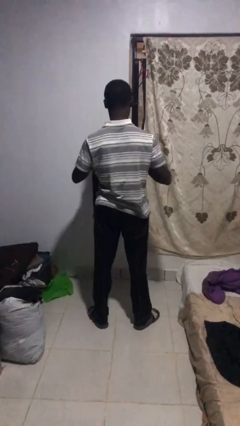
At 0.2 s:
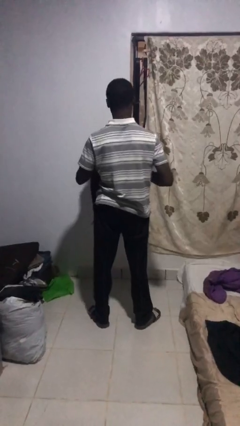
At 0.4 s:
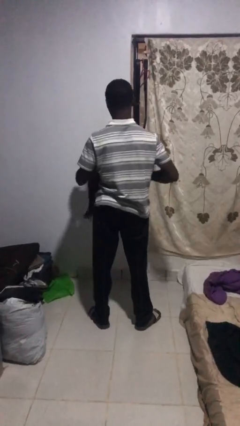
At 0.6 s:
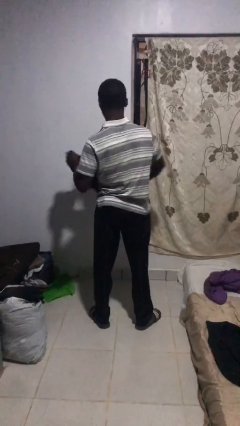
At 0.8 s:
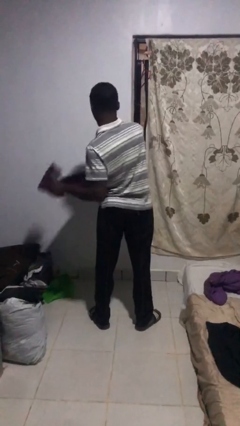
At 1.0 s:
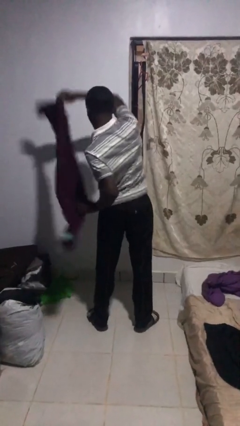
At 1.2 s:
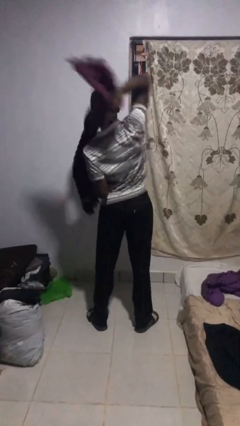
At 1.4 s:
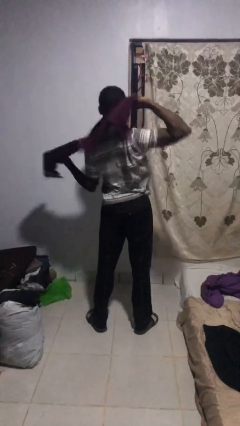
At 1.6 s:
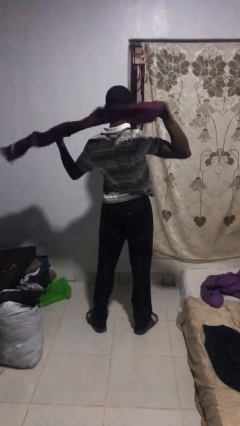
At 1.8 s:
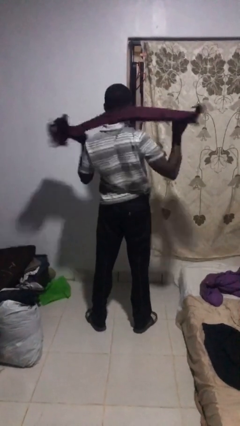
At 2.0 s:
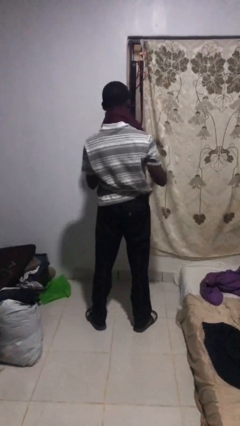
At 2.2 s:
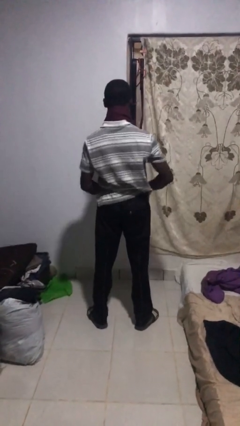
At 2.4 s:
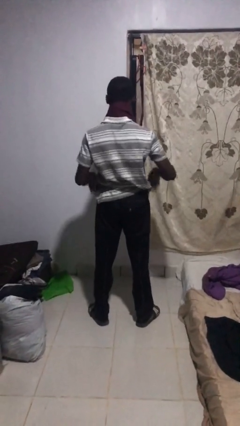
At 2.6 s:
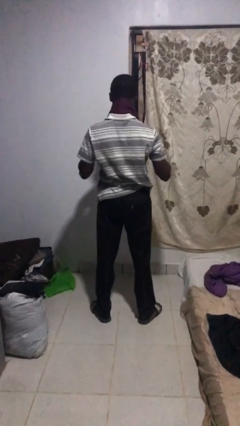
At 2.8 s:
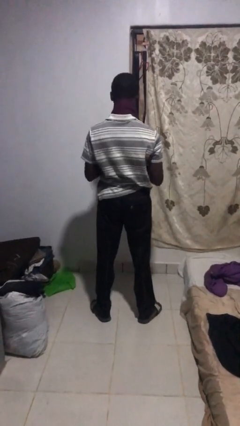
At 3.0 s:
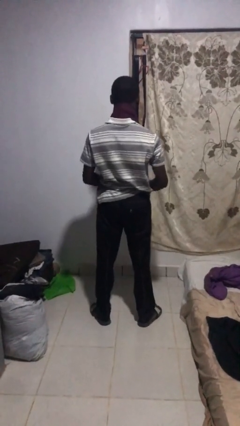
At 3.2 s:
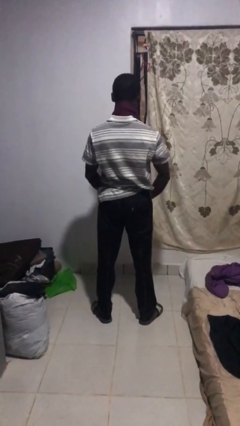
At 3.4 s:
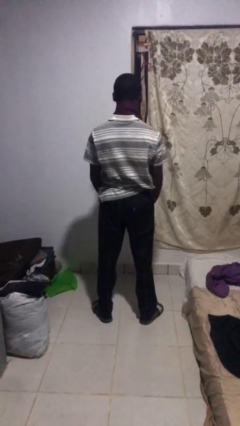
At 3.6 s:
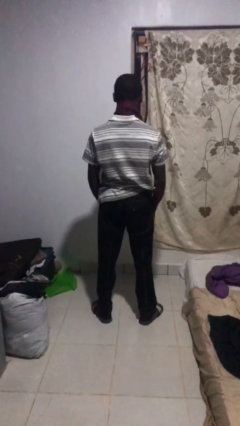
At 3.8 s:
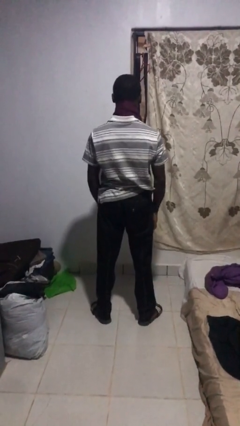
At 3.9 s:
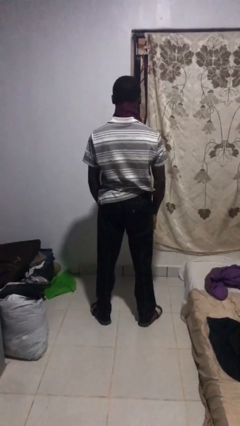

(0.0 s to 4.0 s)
person puts on scarf

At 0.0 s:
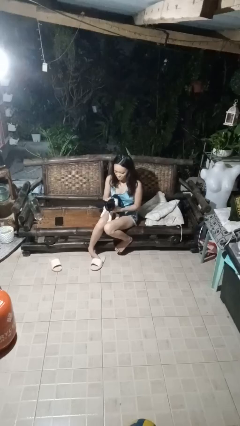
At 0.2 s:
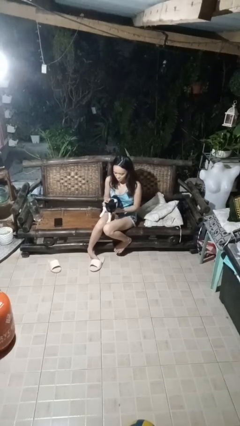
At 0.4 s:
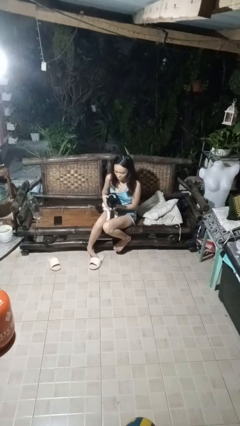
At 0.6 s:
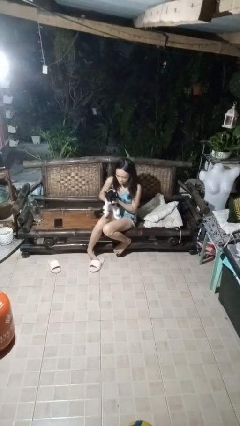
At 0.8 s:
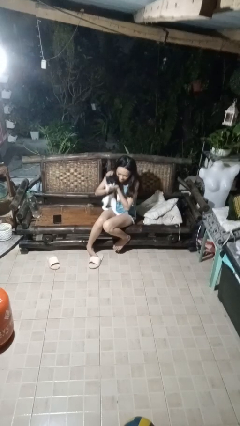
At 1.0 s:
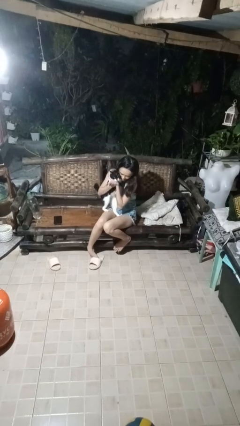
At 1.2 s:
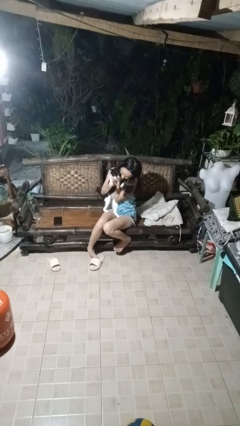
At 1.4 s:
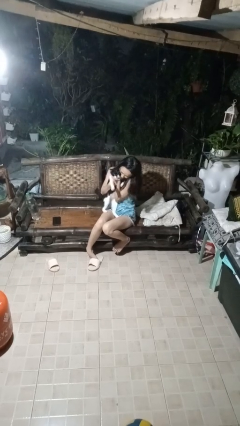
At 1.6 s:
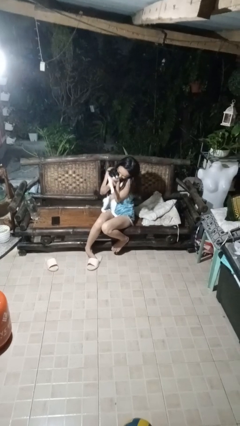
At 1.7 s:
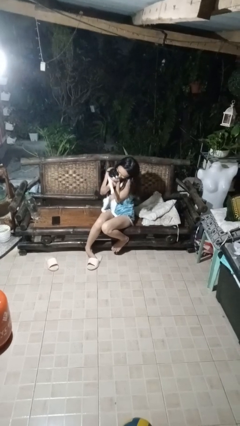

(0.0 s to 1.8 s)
person hugs cat

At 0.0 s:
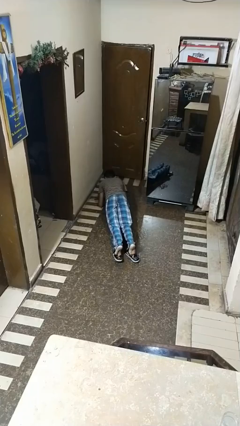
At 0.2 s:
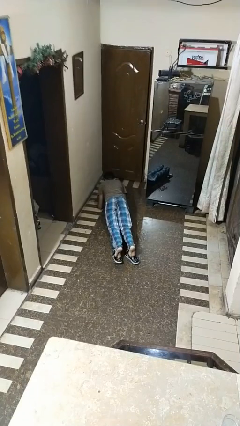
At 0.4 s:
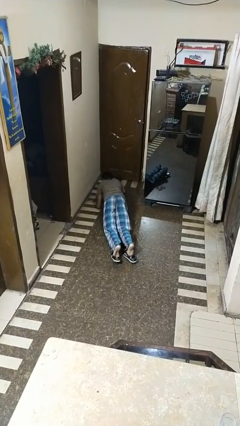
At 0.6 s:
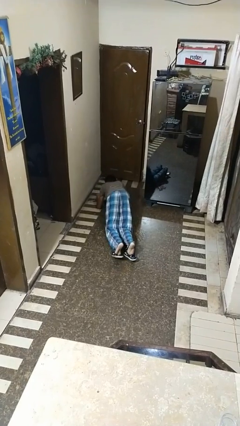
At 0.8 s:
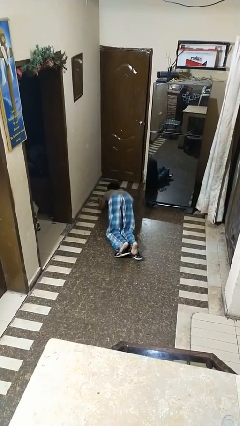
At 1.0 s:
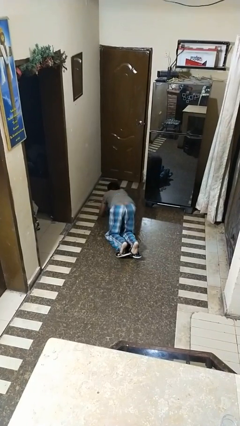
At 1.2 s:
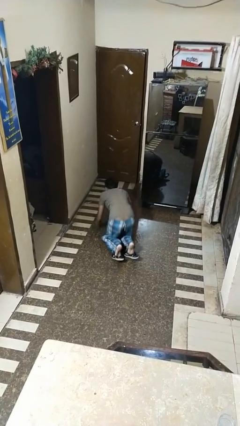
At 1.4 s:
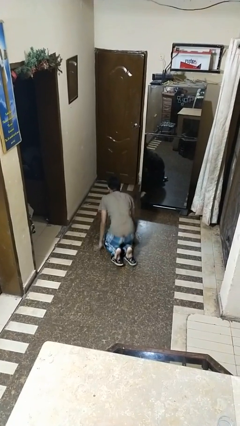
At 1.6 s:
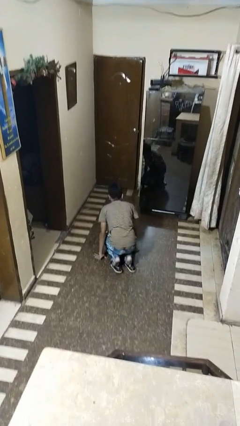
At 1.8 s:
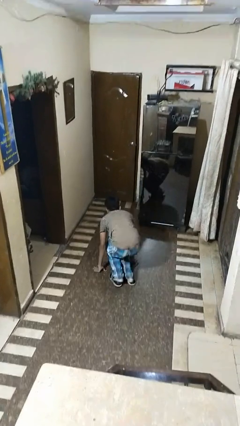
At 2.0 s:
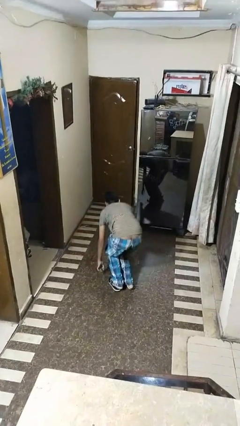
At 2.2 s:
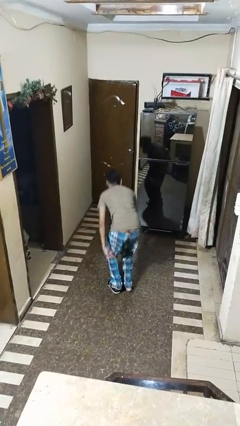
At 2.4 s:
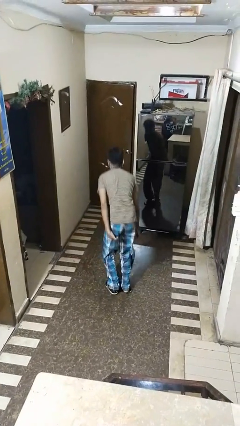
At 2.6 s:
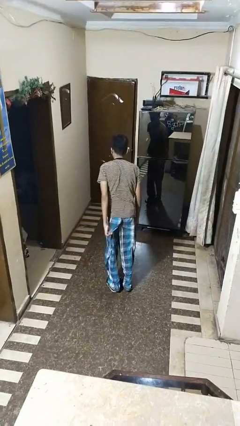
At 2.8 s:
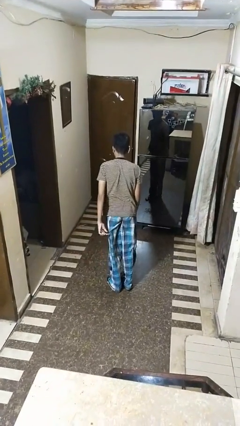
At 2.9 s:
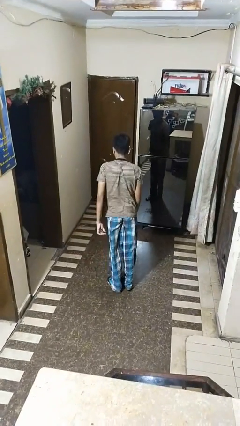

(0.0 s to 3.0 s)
person stands up from floor

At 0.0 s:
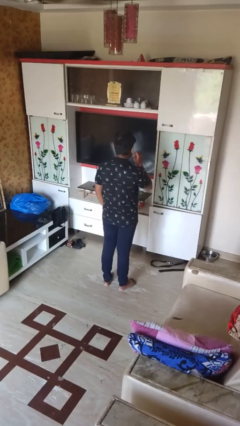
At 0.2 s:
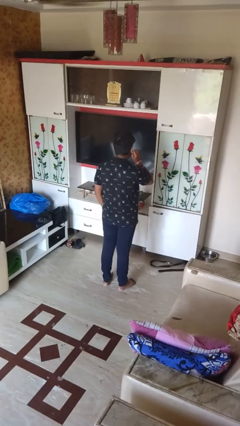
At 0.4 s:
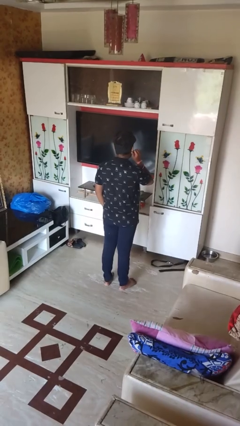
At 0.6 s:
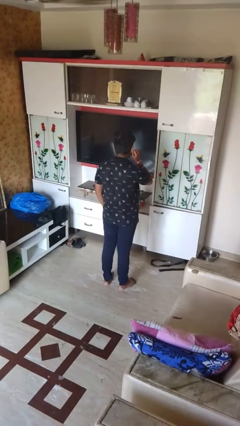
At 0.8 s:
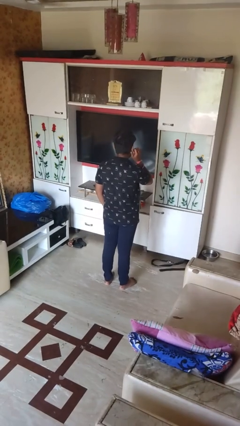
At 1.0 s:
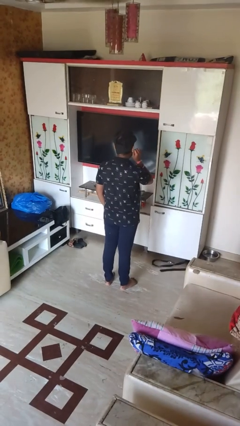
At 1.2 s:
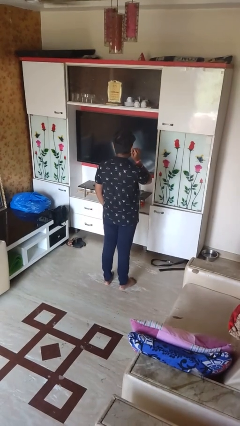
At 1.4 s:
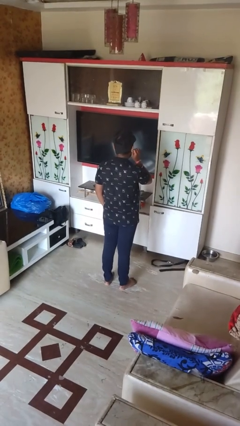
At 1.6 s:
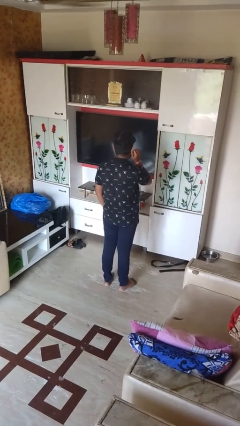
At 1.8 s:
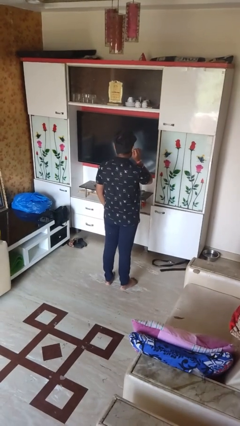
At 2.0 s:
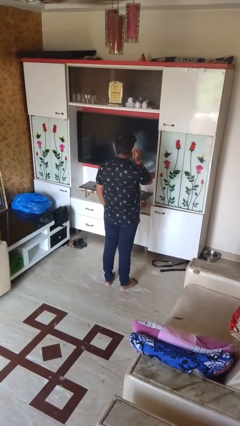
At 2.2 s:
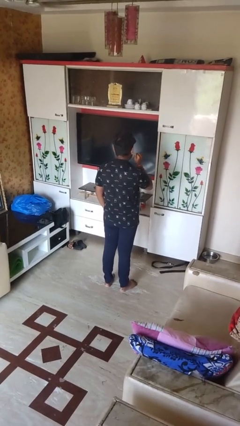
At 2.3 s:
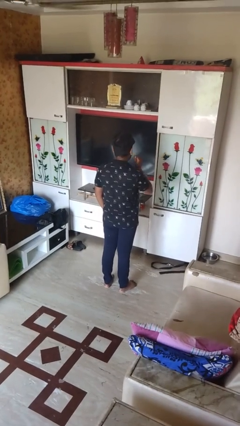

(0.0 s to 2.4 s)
person touches earlobe

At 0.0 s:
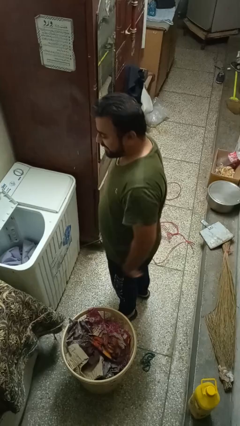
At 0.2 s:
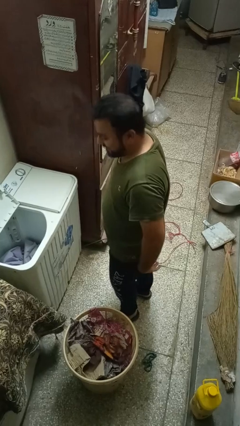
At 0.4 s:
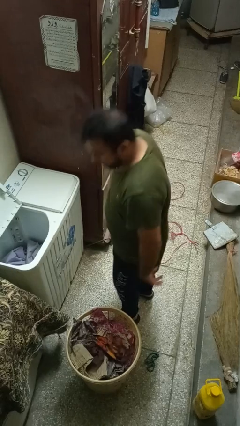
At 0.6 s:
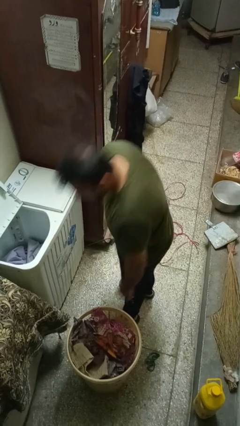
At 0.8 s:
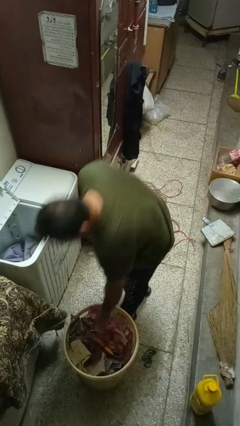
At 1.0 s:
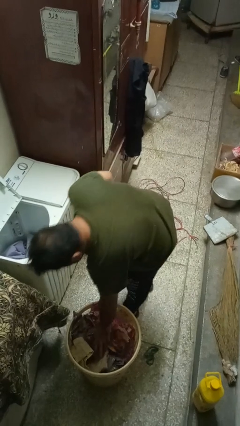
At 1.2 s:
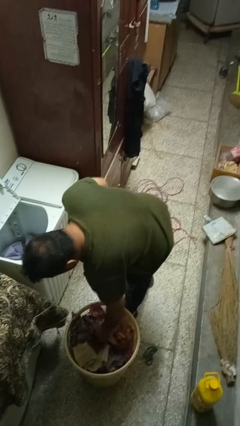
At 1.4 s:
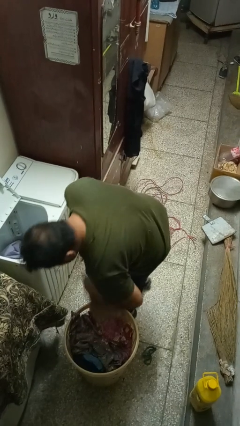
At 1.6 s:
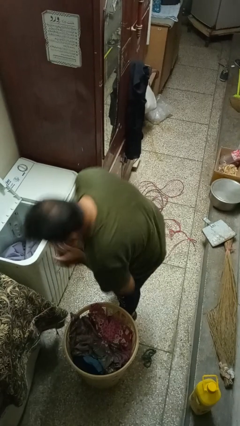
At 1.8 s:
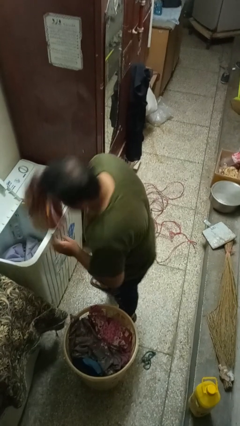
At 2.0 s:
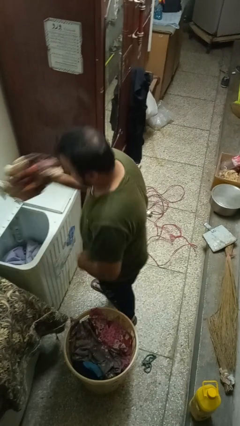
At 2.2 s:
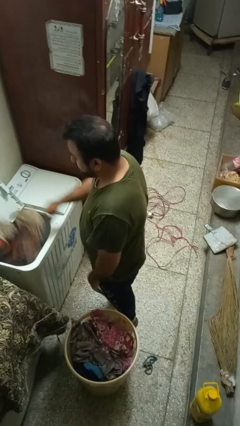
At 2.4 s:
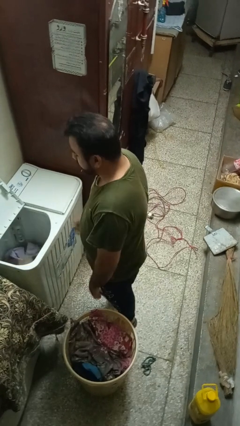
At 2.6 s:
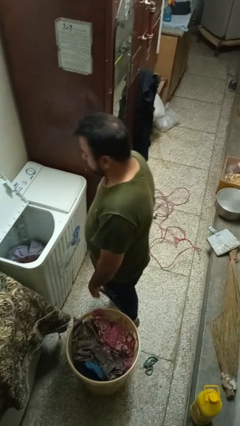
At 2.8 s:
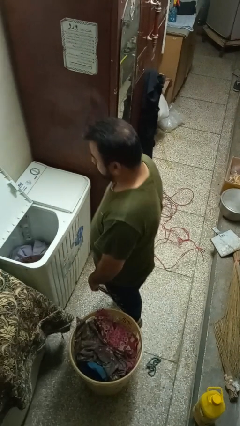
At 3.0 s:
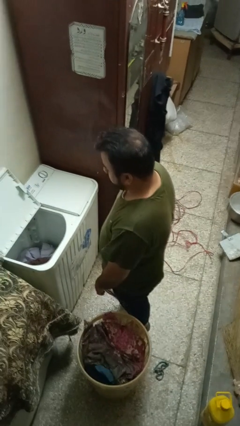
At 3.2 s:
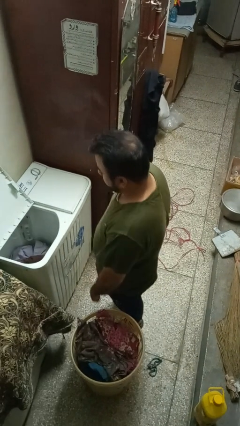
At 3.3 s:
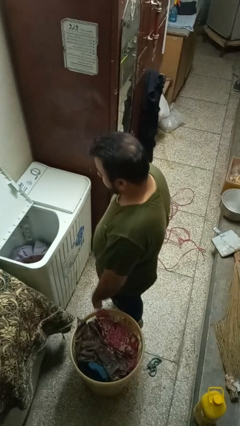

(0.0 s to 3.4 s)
person loads clotheswasher

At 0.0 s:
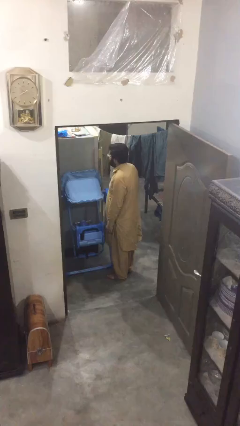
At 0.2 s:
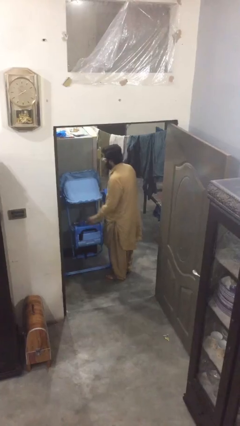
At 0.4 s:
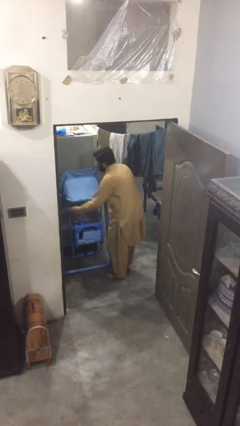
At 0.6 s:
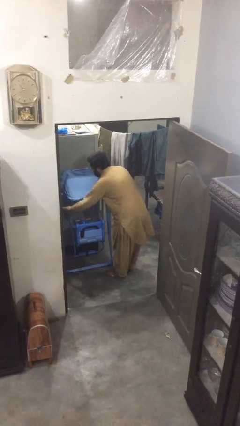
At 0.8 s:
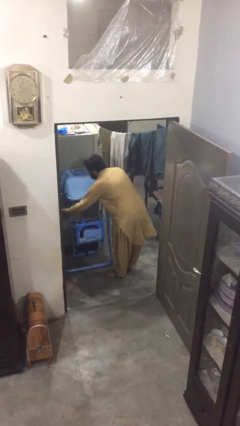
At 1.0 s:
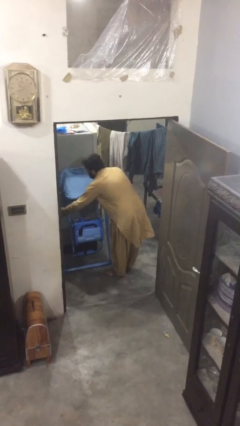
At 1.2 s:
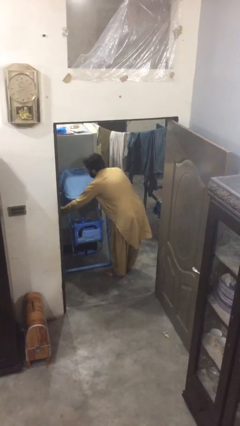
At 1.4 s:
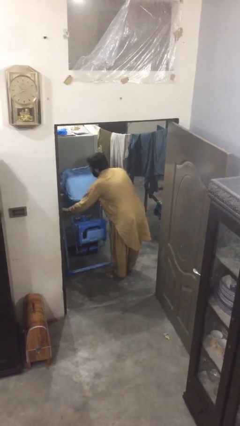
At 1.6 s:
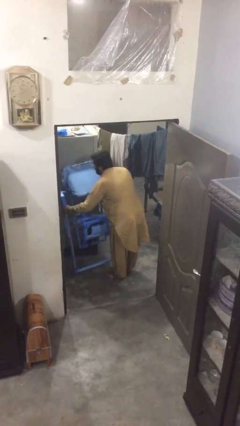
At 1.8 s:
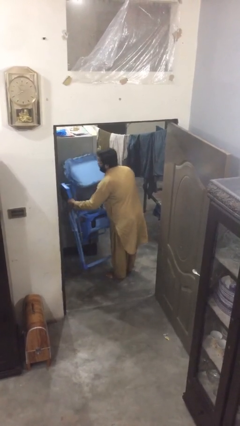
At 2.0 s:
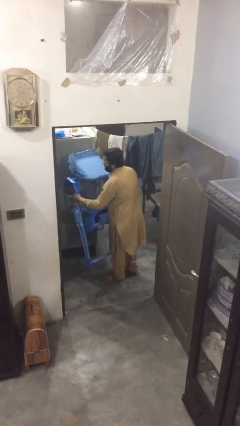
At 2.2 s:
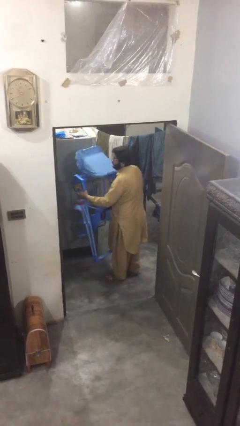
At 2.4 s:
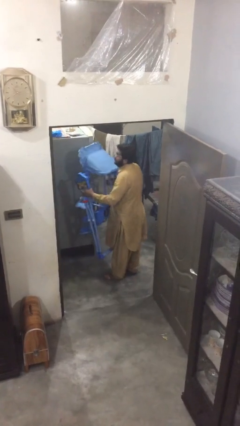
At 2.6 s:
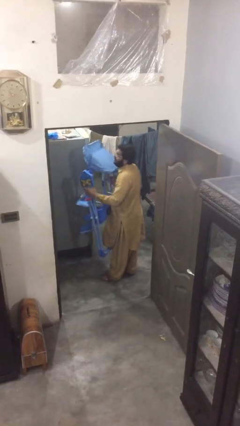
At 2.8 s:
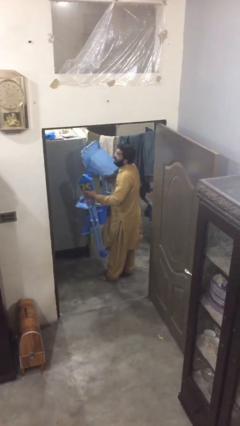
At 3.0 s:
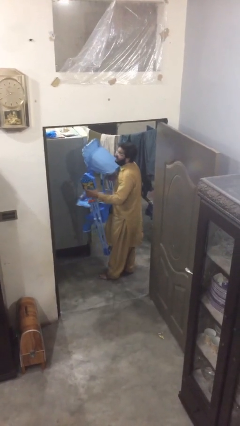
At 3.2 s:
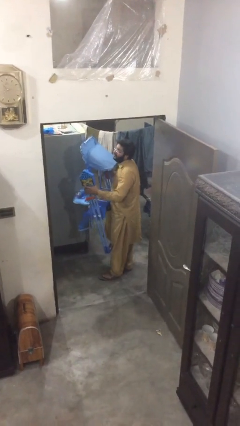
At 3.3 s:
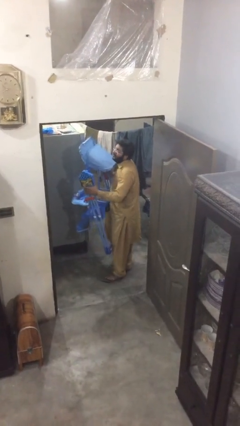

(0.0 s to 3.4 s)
person picks up object from floor
